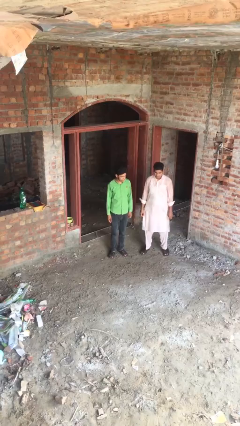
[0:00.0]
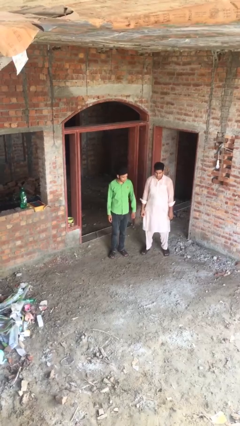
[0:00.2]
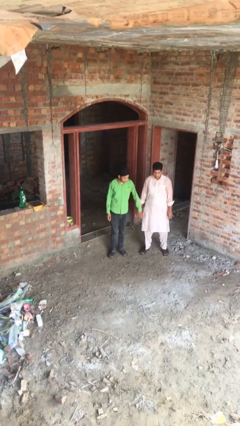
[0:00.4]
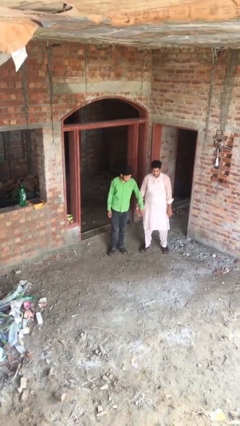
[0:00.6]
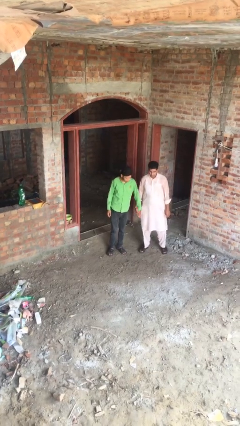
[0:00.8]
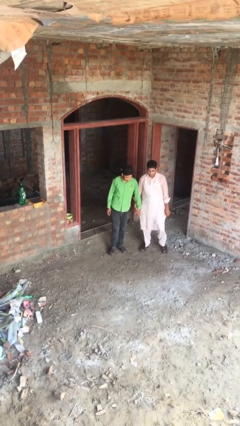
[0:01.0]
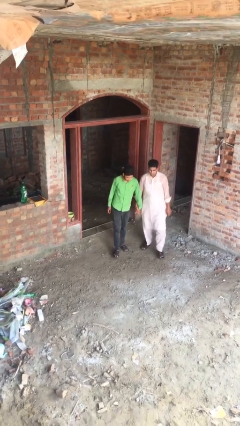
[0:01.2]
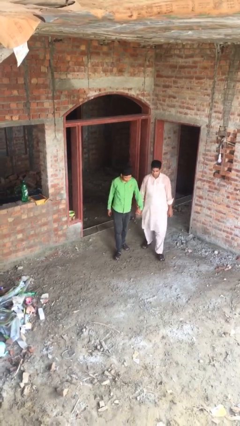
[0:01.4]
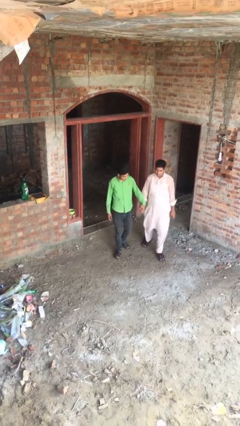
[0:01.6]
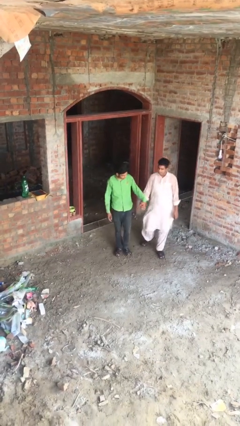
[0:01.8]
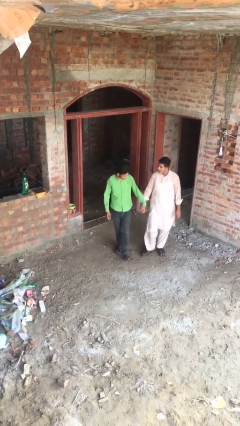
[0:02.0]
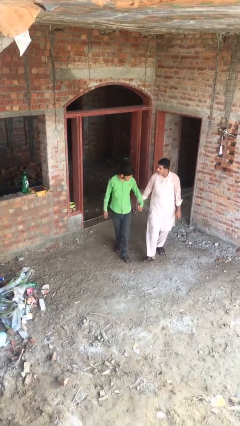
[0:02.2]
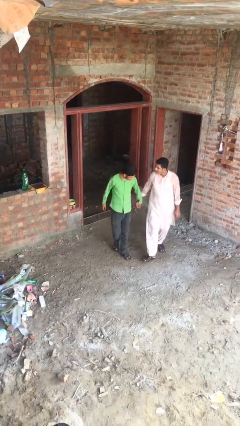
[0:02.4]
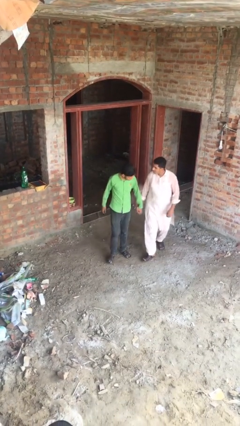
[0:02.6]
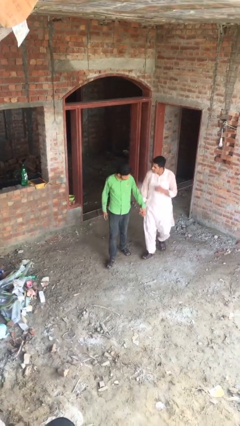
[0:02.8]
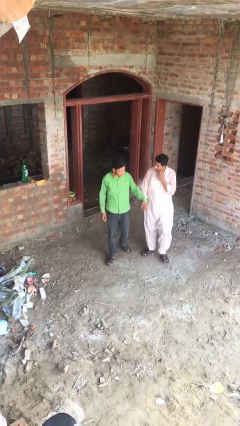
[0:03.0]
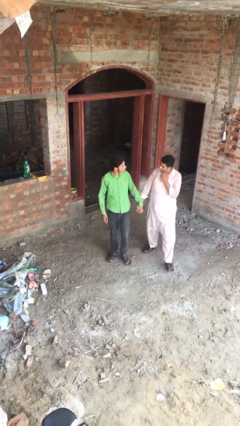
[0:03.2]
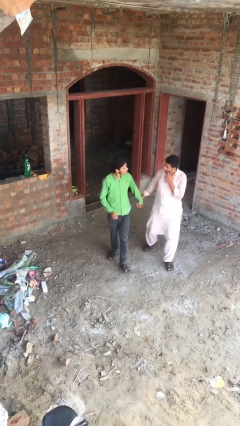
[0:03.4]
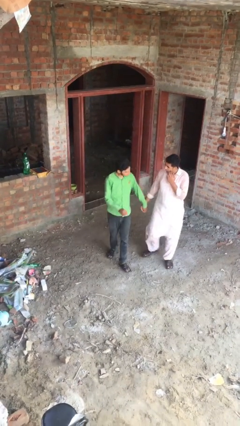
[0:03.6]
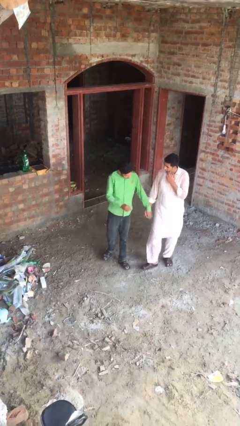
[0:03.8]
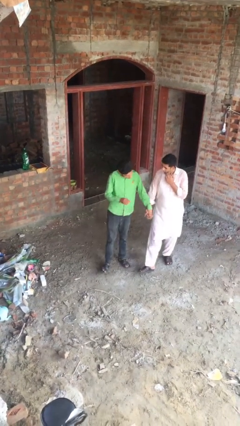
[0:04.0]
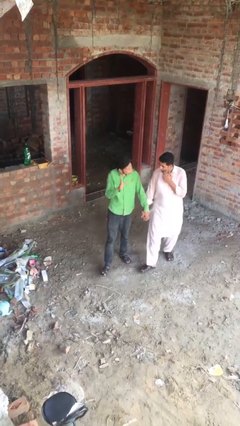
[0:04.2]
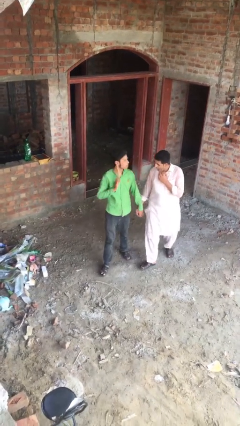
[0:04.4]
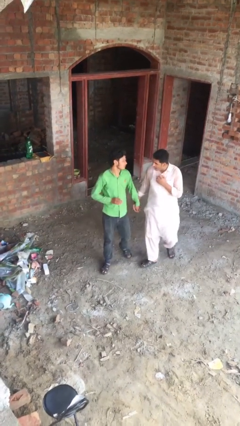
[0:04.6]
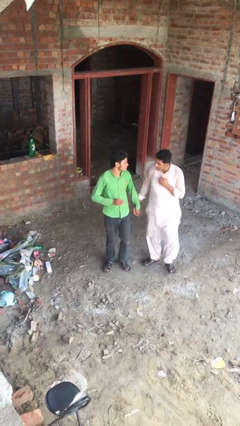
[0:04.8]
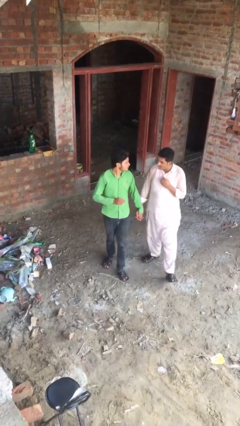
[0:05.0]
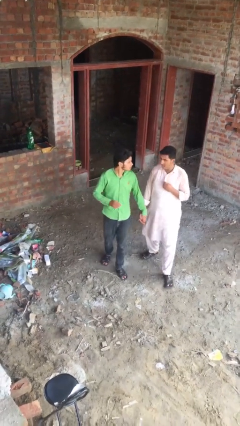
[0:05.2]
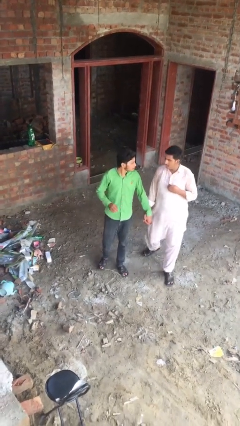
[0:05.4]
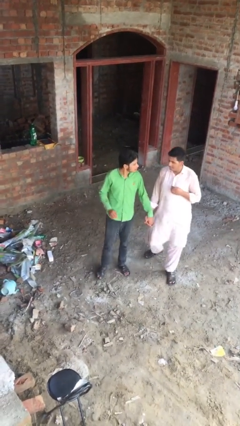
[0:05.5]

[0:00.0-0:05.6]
person holds hand

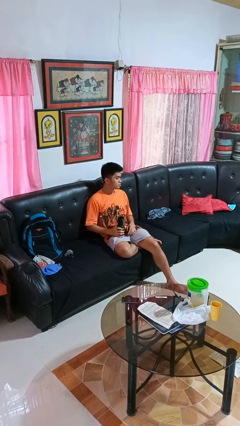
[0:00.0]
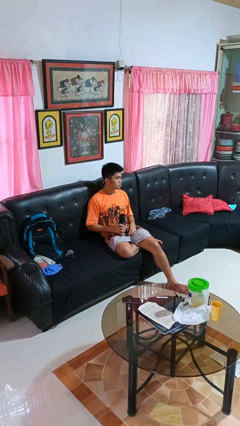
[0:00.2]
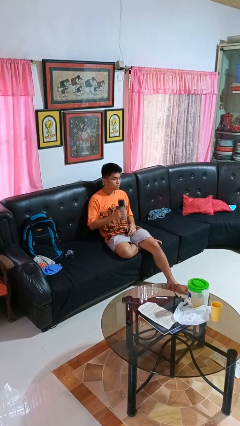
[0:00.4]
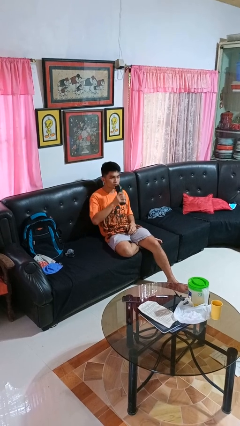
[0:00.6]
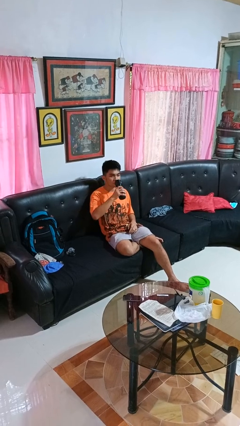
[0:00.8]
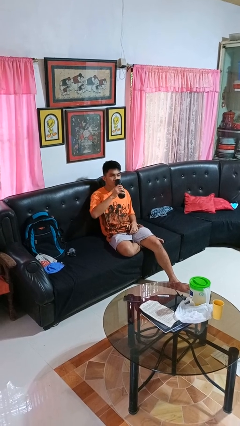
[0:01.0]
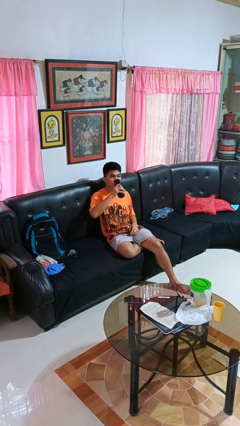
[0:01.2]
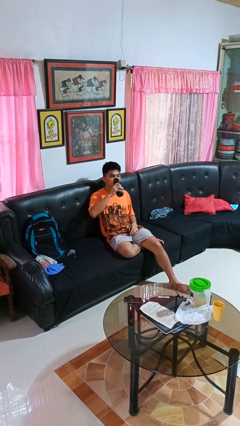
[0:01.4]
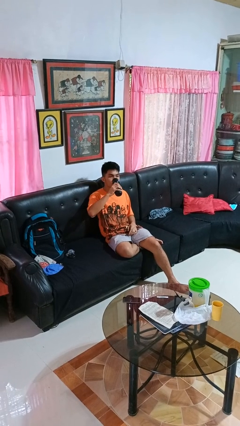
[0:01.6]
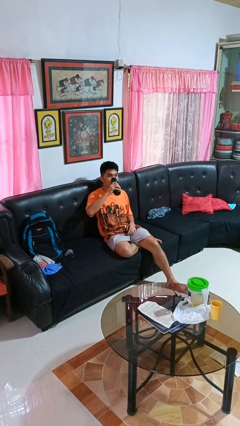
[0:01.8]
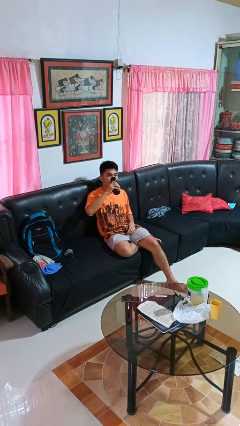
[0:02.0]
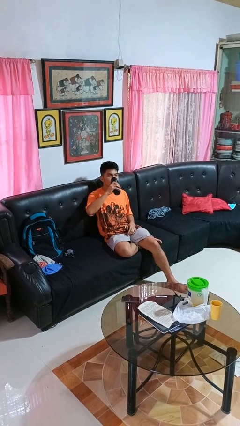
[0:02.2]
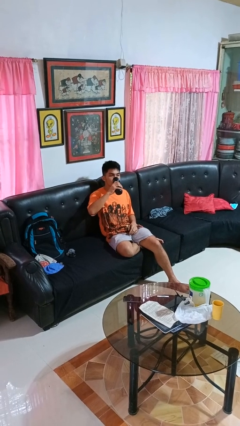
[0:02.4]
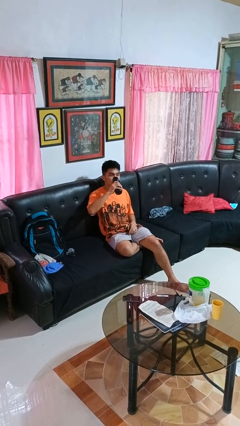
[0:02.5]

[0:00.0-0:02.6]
person drinks from bottle

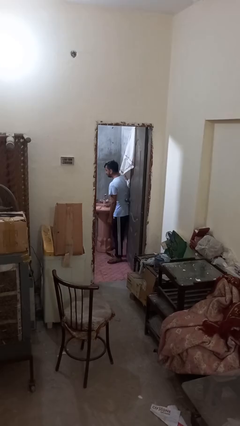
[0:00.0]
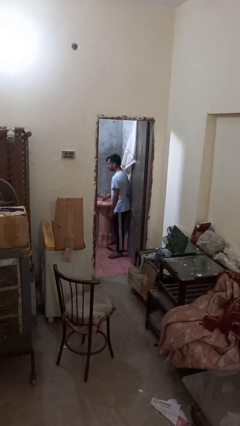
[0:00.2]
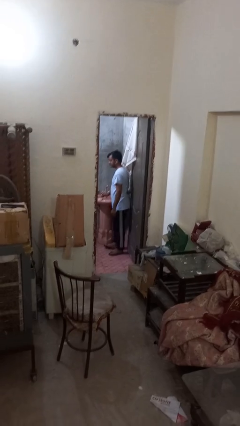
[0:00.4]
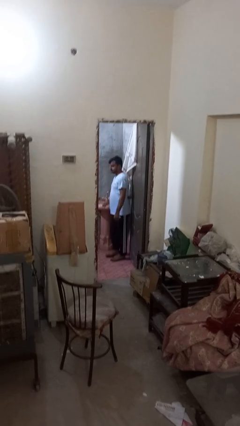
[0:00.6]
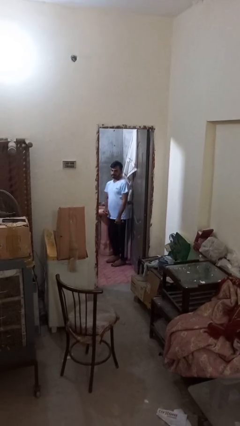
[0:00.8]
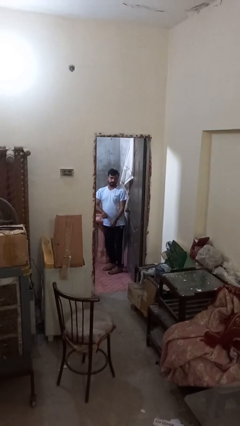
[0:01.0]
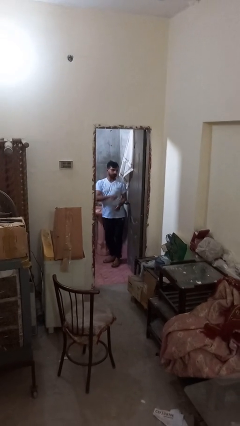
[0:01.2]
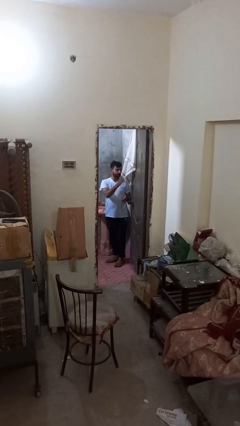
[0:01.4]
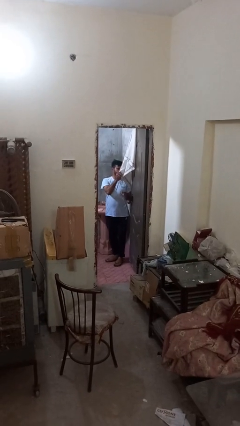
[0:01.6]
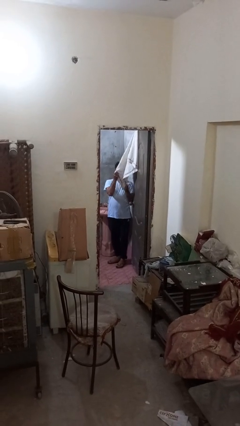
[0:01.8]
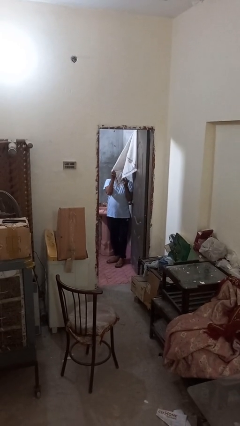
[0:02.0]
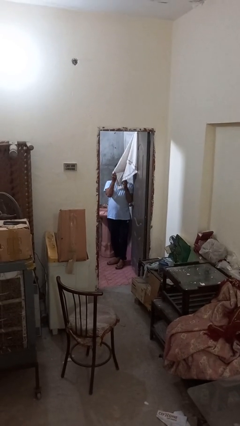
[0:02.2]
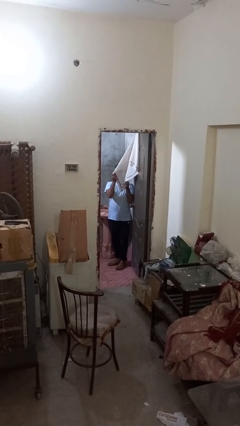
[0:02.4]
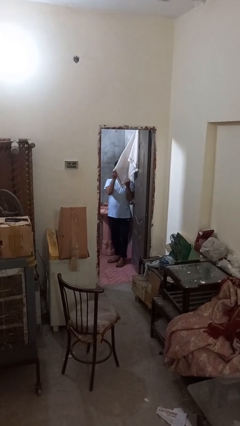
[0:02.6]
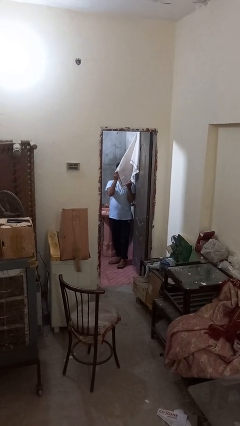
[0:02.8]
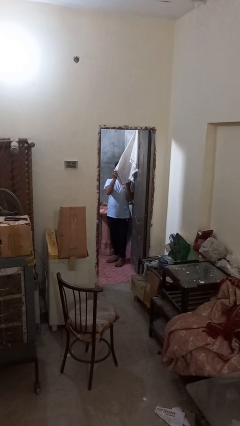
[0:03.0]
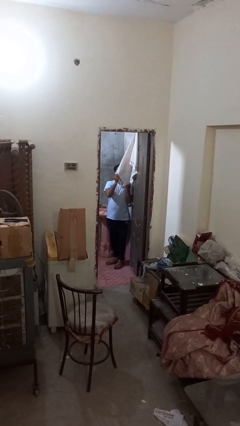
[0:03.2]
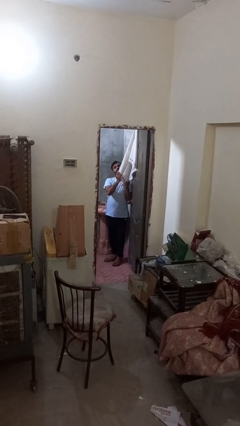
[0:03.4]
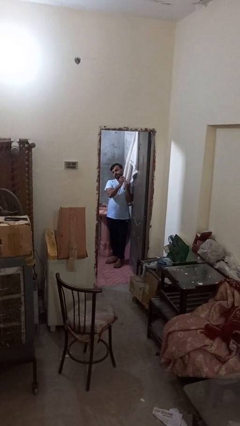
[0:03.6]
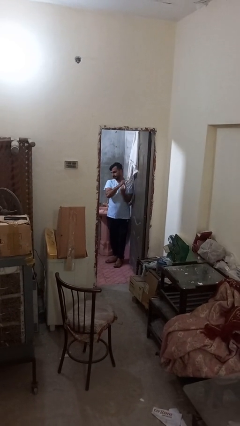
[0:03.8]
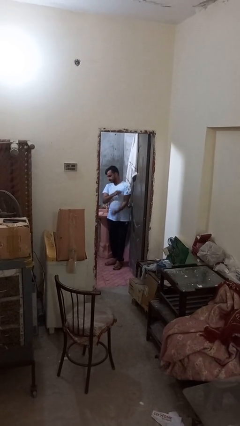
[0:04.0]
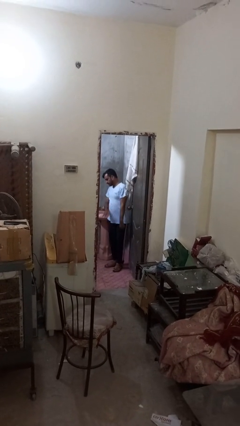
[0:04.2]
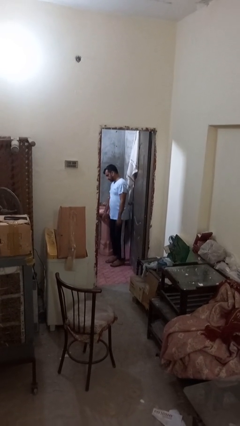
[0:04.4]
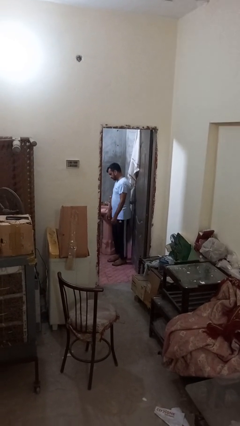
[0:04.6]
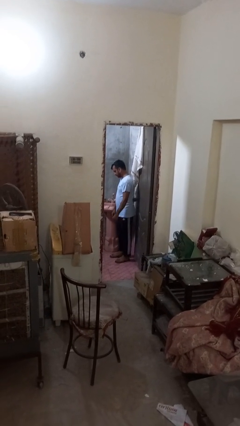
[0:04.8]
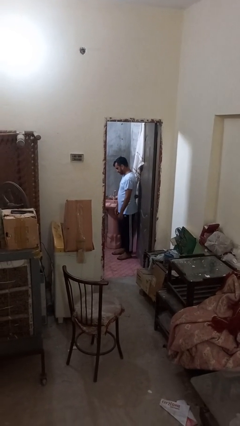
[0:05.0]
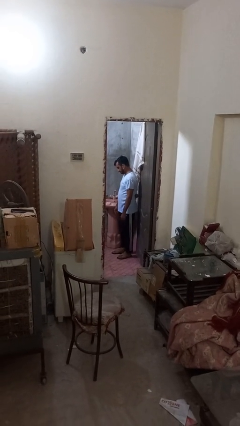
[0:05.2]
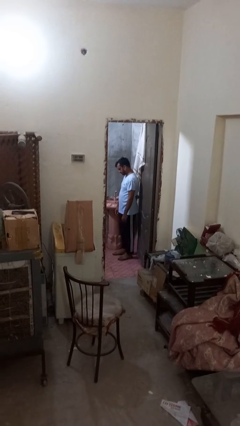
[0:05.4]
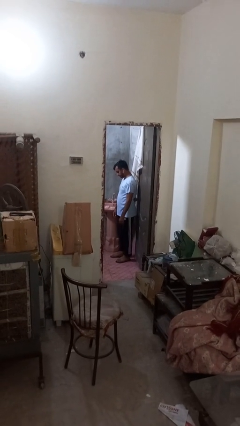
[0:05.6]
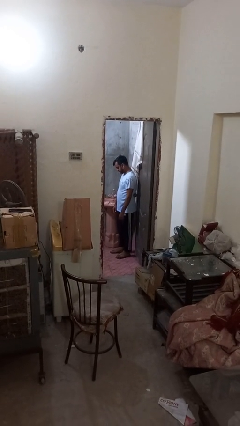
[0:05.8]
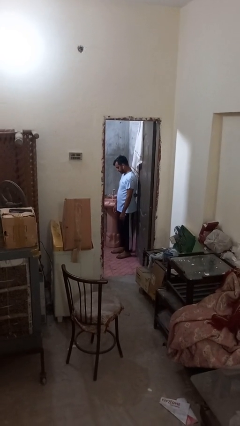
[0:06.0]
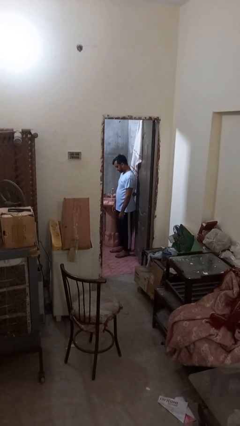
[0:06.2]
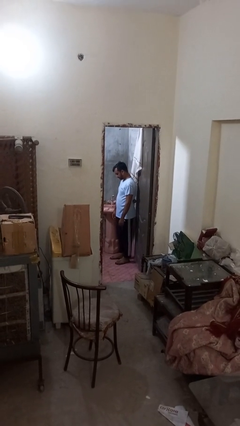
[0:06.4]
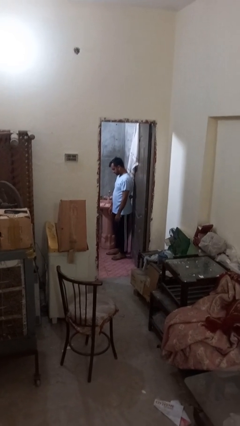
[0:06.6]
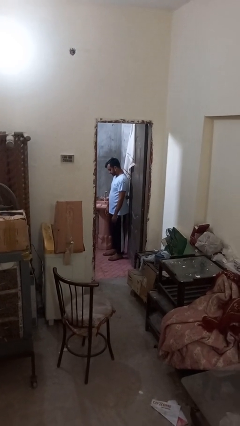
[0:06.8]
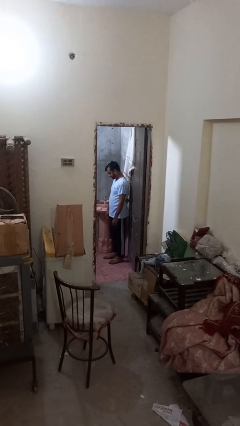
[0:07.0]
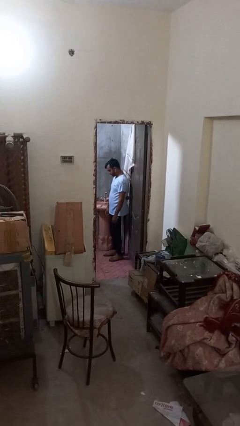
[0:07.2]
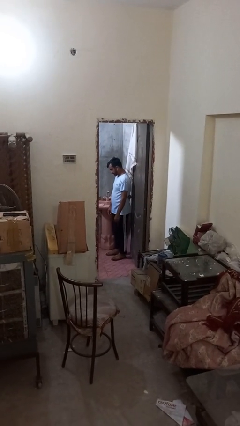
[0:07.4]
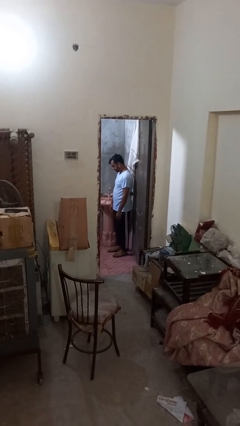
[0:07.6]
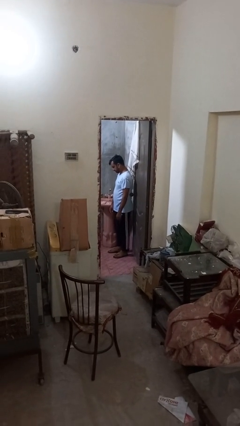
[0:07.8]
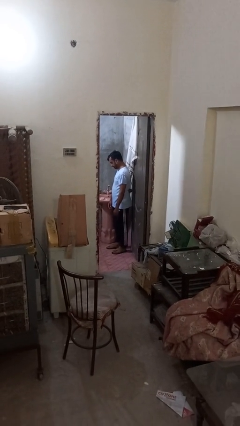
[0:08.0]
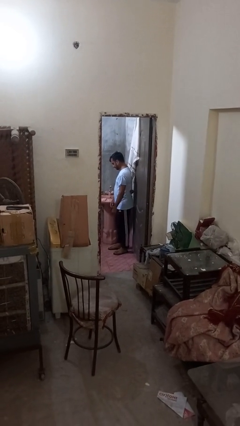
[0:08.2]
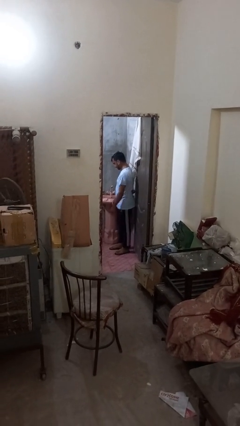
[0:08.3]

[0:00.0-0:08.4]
person dries face with towel

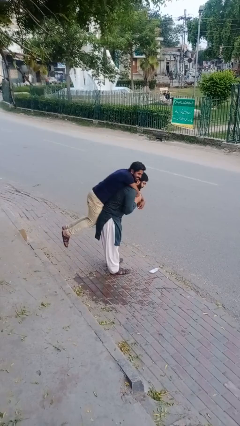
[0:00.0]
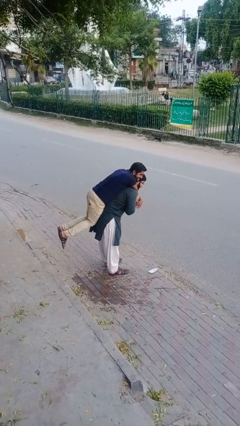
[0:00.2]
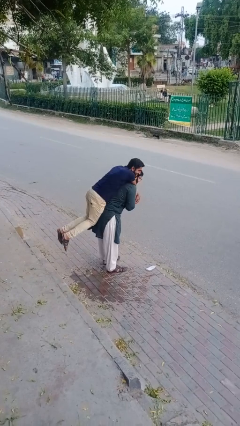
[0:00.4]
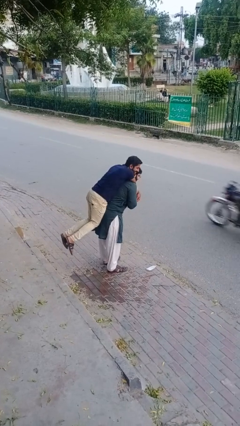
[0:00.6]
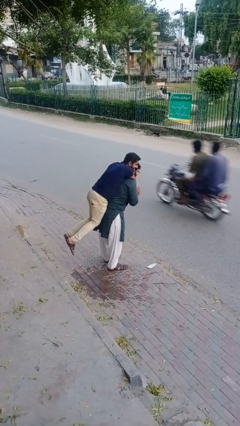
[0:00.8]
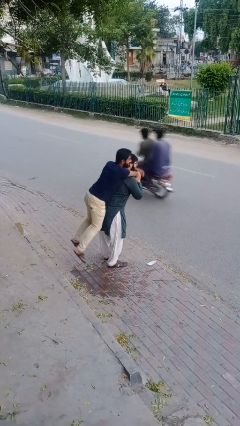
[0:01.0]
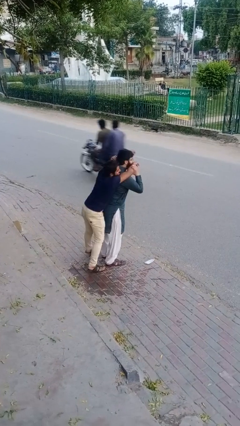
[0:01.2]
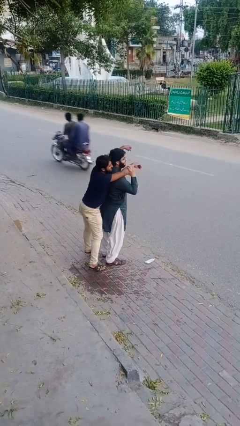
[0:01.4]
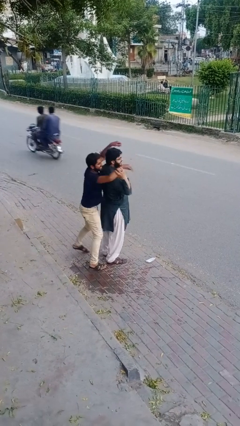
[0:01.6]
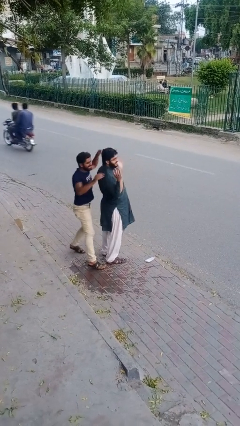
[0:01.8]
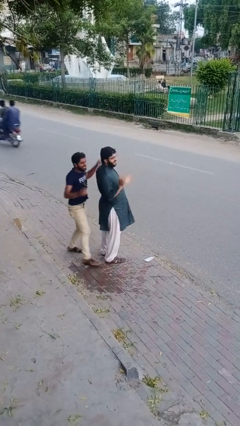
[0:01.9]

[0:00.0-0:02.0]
person puts down person
